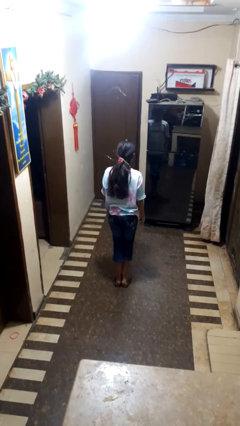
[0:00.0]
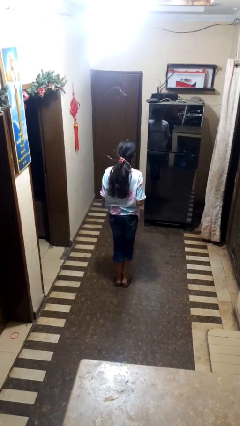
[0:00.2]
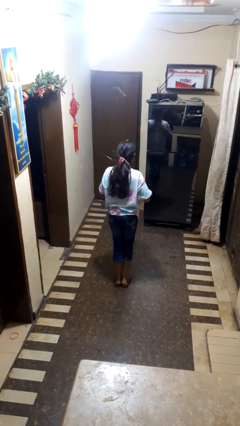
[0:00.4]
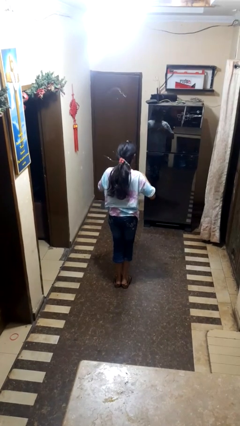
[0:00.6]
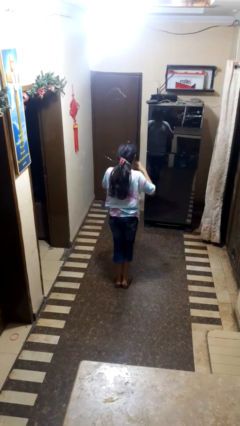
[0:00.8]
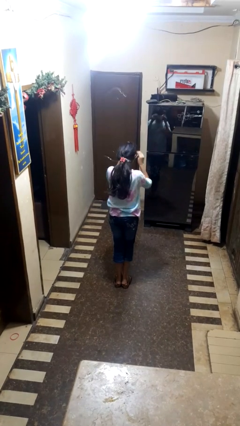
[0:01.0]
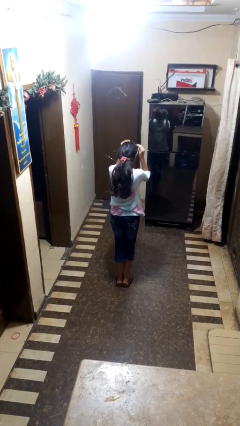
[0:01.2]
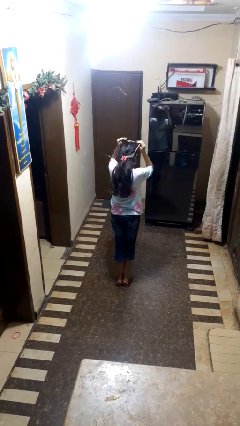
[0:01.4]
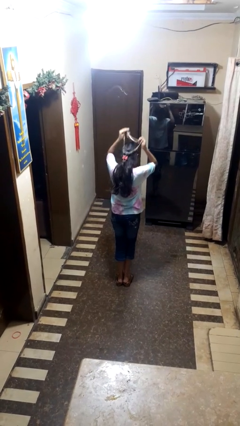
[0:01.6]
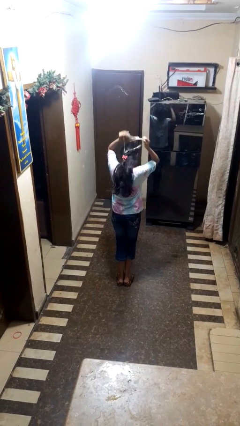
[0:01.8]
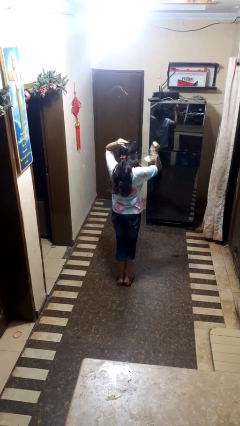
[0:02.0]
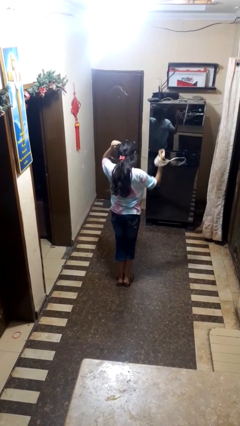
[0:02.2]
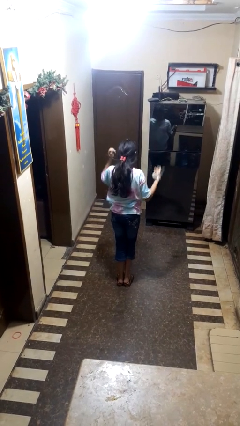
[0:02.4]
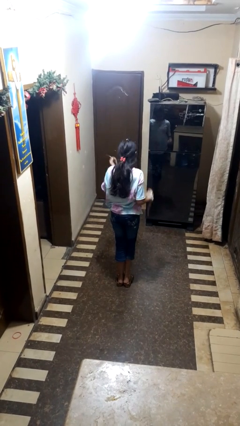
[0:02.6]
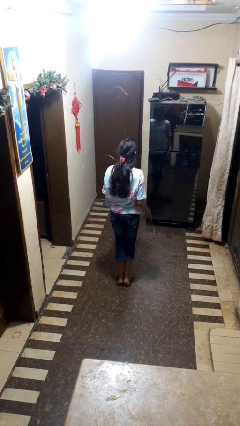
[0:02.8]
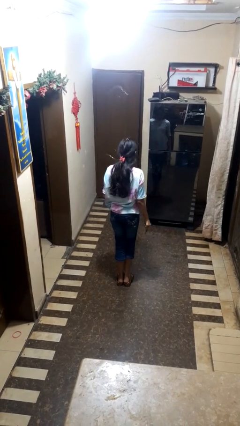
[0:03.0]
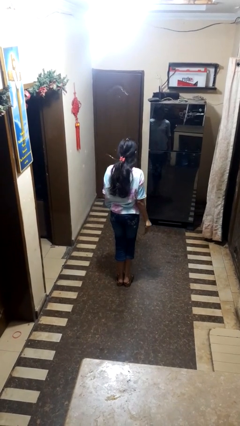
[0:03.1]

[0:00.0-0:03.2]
person takes off necklace

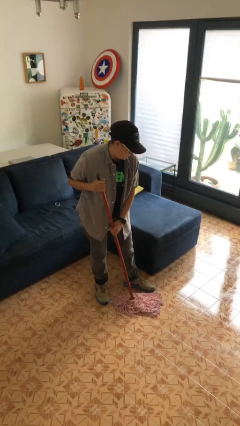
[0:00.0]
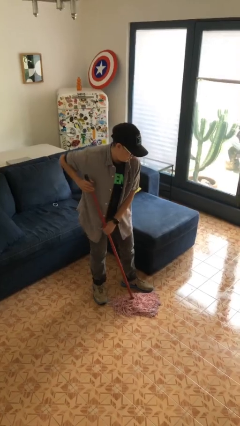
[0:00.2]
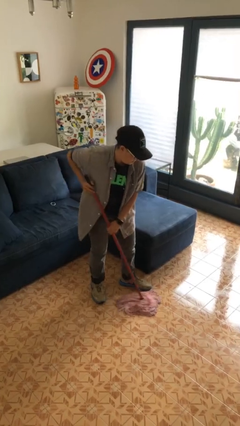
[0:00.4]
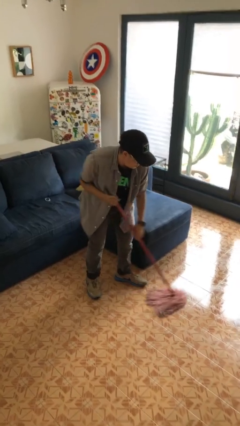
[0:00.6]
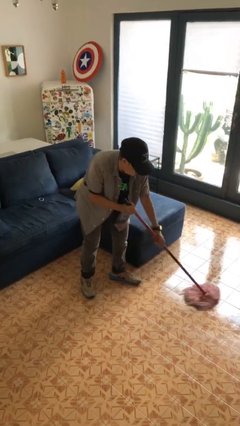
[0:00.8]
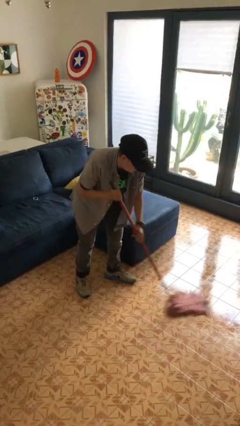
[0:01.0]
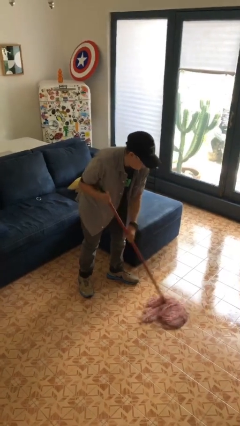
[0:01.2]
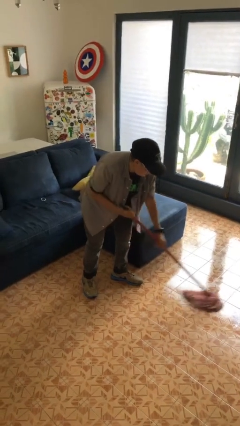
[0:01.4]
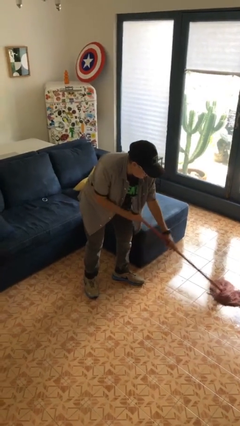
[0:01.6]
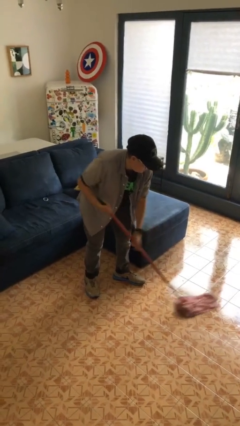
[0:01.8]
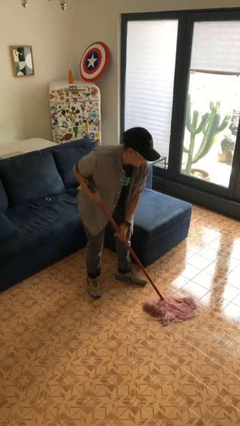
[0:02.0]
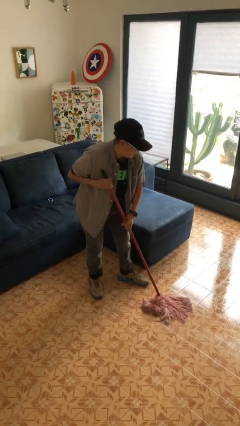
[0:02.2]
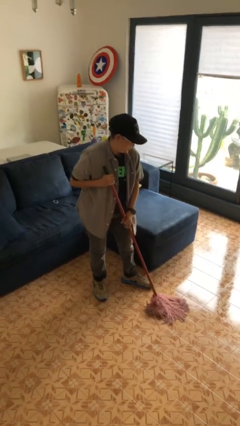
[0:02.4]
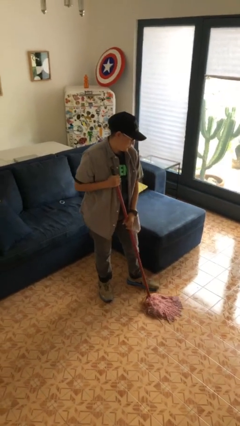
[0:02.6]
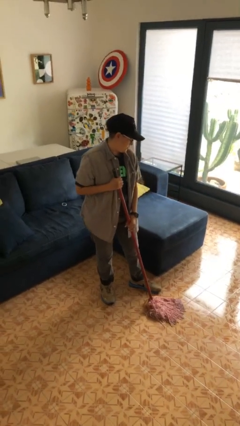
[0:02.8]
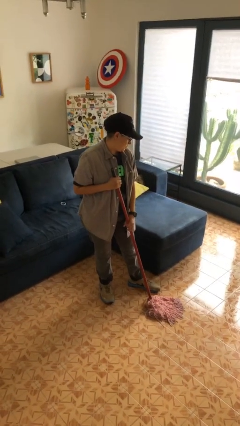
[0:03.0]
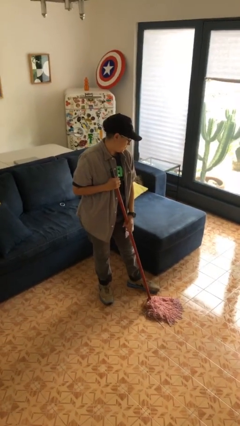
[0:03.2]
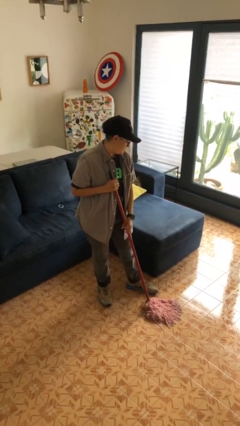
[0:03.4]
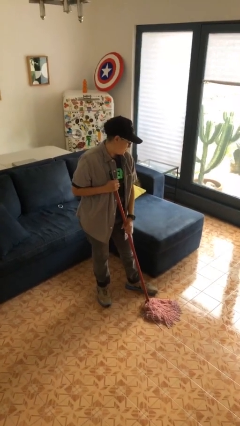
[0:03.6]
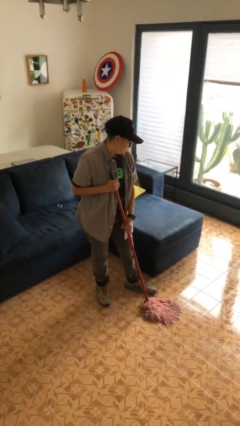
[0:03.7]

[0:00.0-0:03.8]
person mops

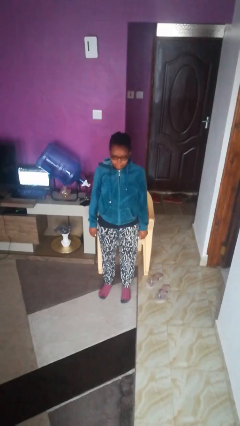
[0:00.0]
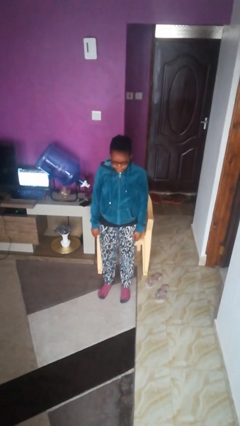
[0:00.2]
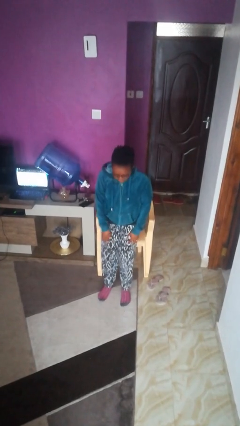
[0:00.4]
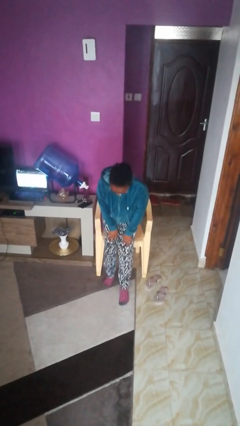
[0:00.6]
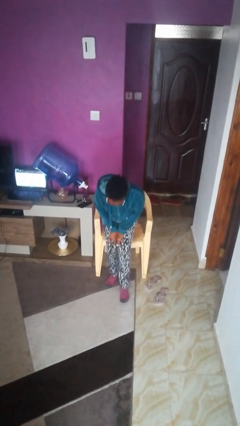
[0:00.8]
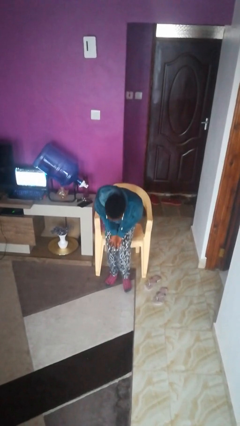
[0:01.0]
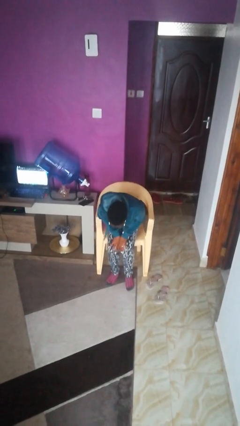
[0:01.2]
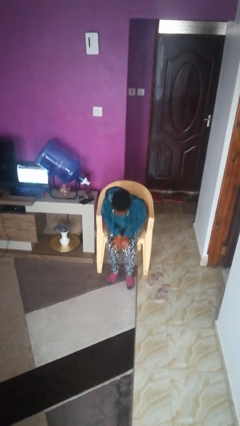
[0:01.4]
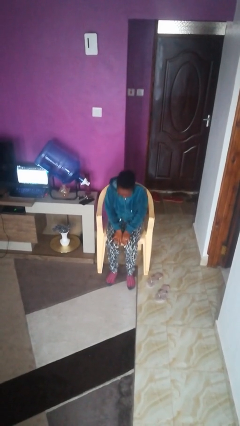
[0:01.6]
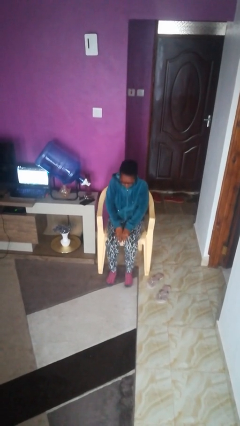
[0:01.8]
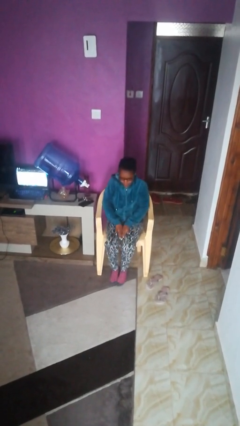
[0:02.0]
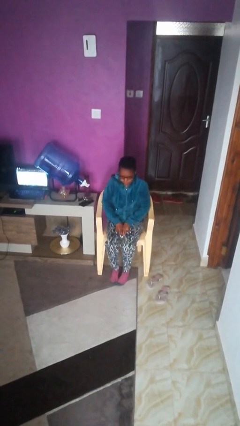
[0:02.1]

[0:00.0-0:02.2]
person sits down

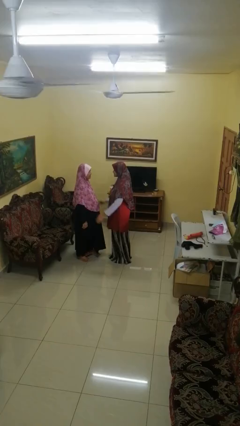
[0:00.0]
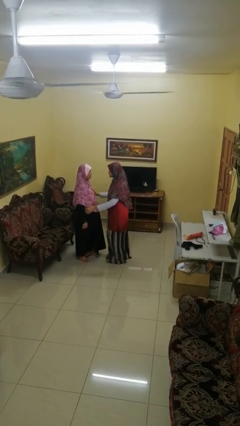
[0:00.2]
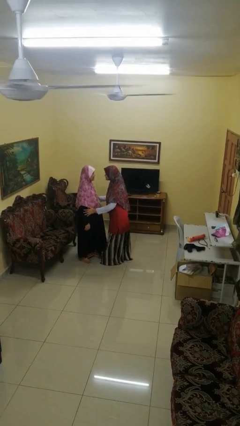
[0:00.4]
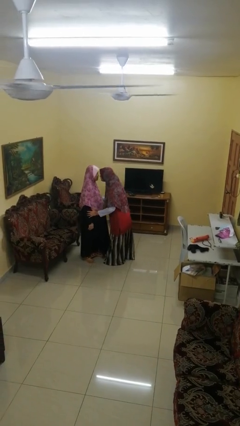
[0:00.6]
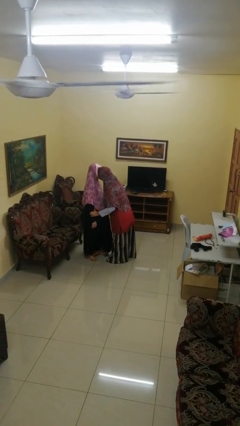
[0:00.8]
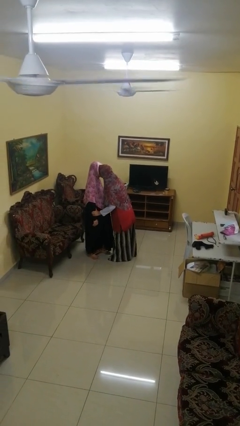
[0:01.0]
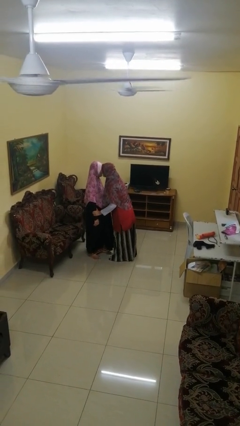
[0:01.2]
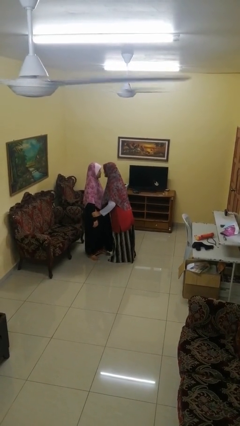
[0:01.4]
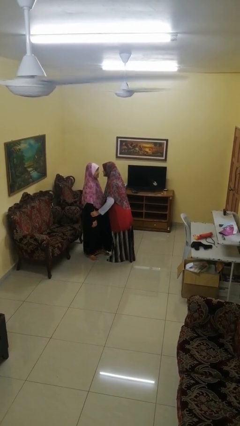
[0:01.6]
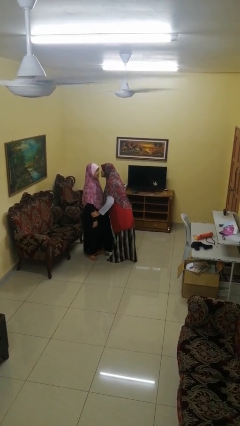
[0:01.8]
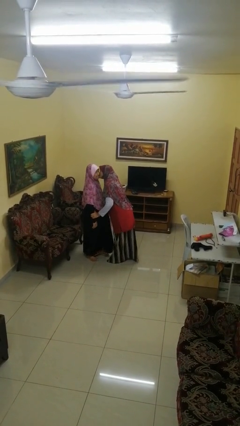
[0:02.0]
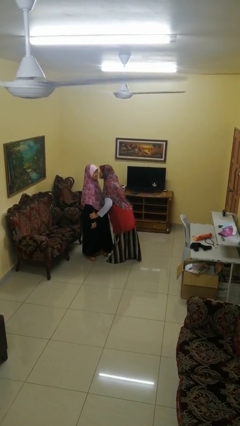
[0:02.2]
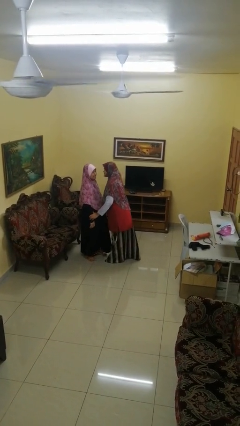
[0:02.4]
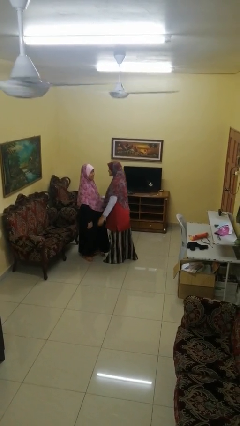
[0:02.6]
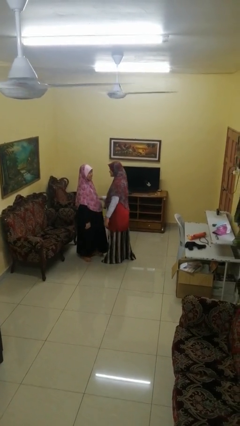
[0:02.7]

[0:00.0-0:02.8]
person kisses cheek of person

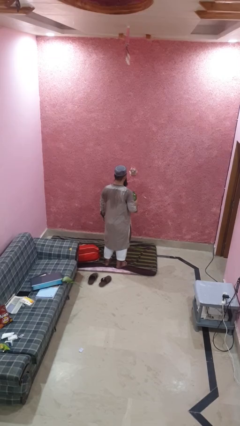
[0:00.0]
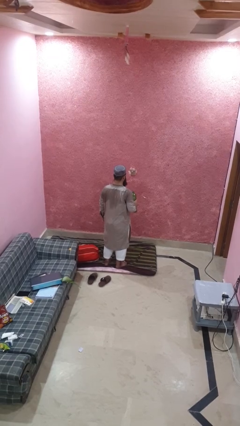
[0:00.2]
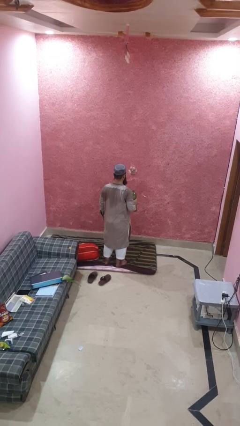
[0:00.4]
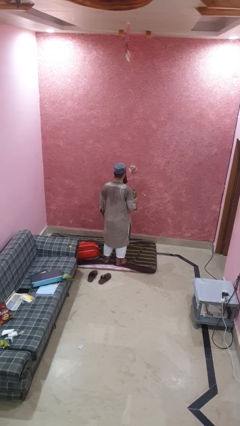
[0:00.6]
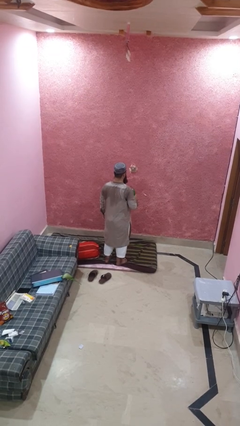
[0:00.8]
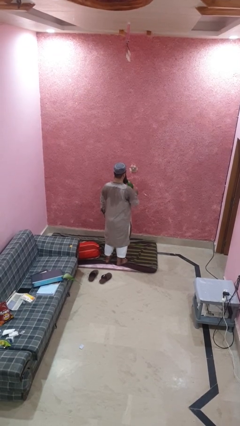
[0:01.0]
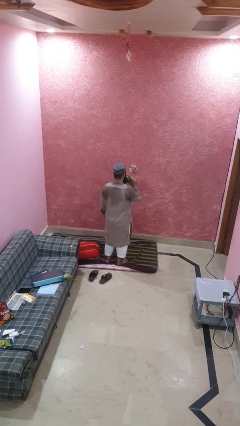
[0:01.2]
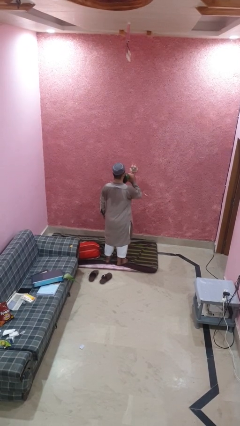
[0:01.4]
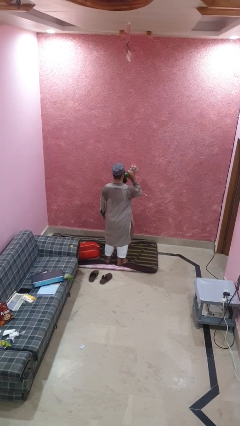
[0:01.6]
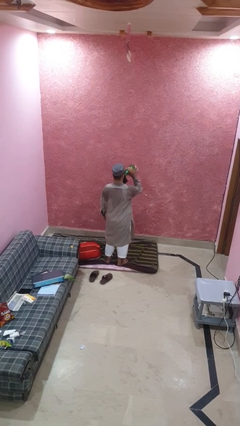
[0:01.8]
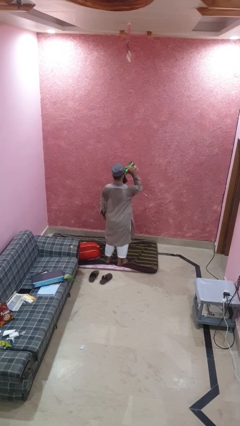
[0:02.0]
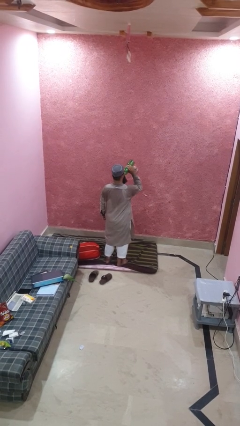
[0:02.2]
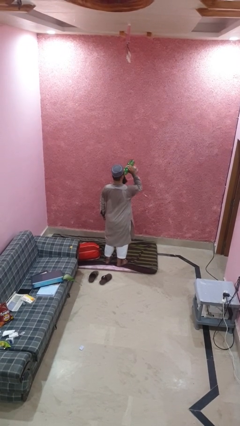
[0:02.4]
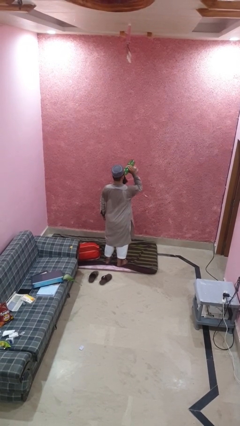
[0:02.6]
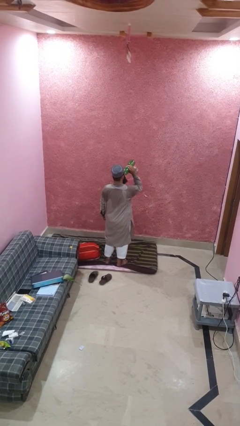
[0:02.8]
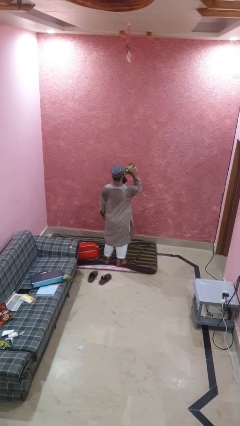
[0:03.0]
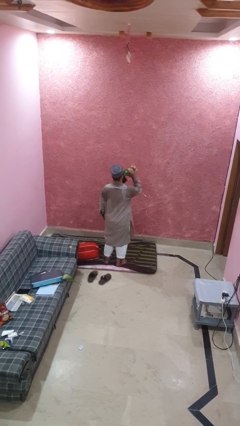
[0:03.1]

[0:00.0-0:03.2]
person drinks from bottle

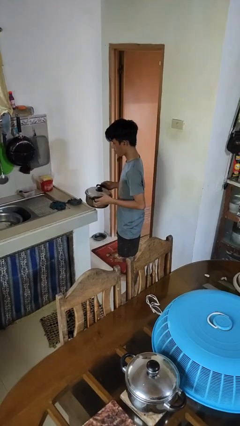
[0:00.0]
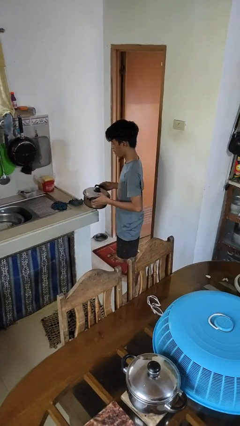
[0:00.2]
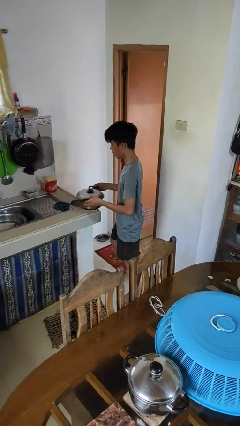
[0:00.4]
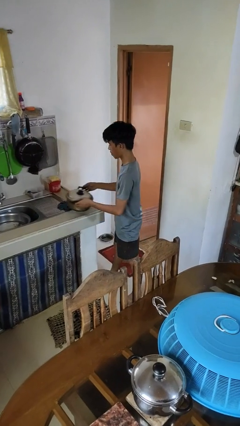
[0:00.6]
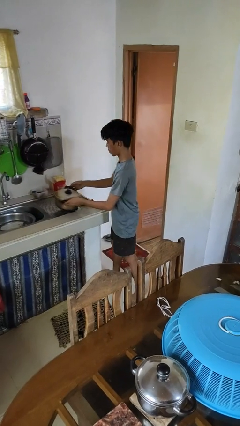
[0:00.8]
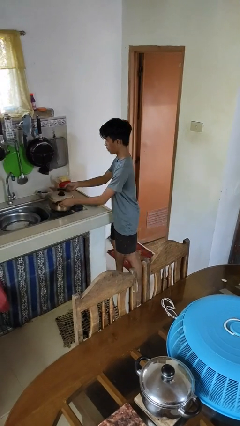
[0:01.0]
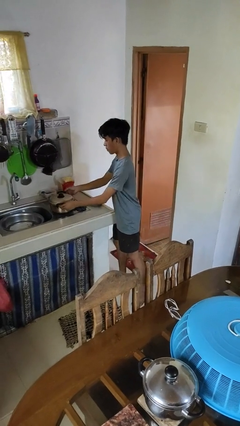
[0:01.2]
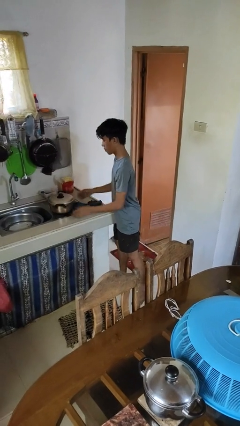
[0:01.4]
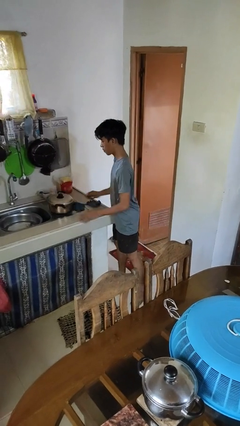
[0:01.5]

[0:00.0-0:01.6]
person puts down object on countertop

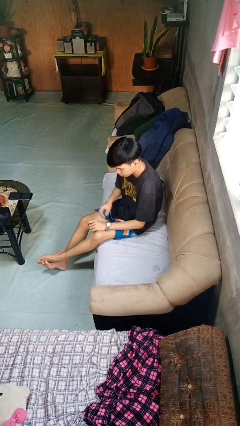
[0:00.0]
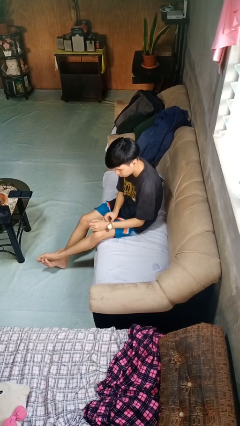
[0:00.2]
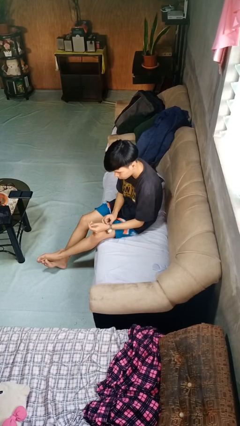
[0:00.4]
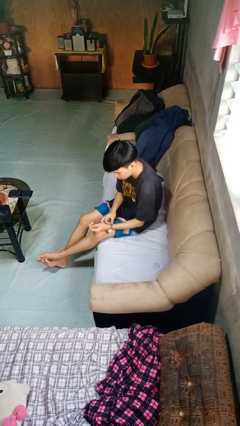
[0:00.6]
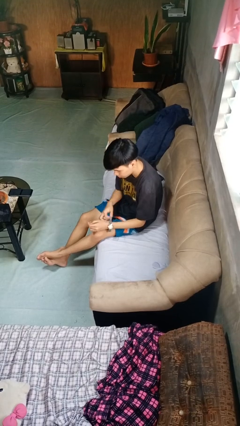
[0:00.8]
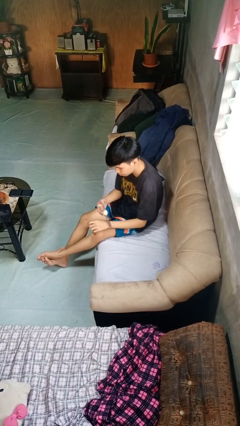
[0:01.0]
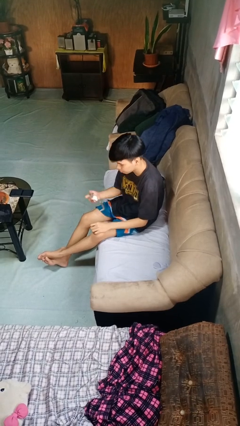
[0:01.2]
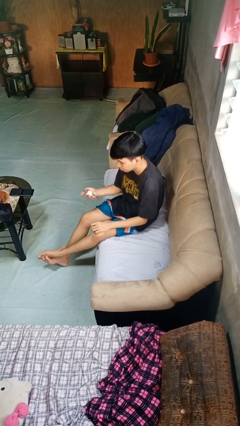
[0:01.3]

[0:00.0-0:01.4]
person takes off wristwatch
